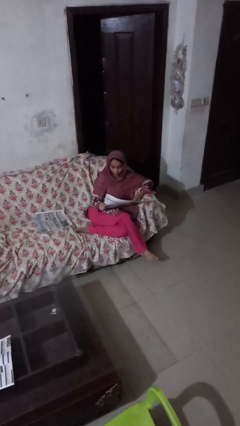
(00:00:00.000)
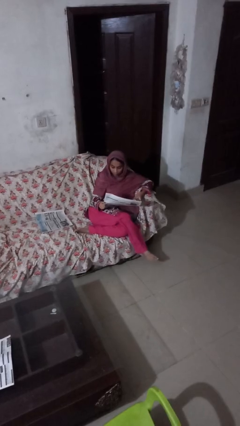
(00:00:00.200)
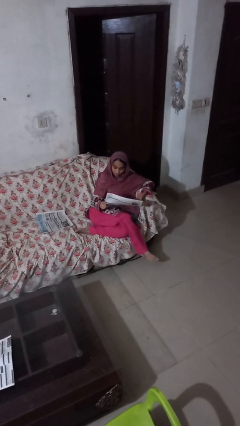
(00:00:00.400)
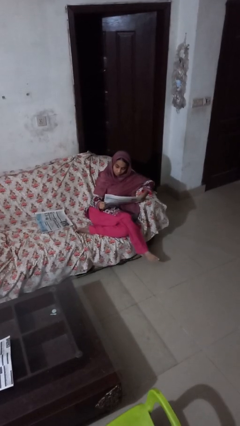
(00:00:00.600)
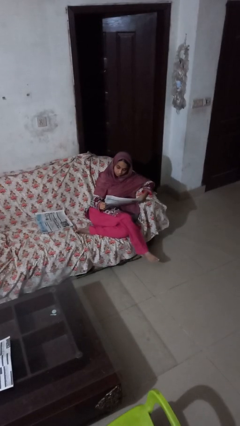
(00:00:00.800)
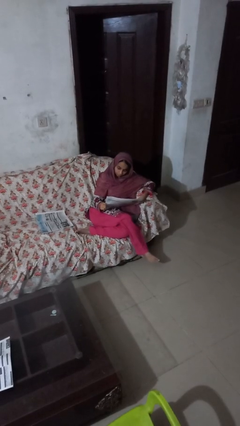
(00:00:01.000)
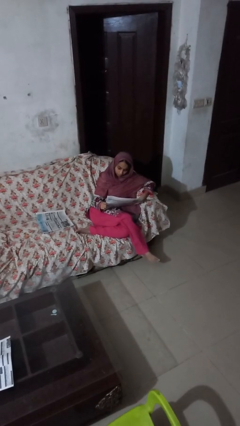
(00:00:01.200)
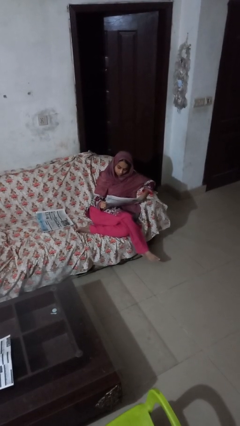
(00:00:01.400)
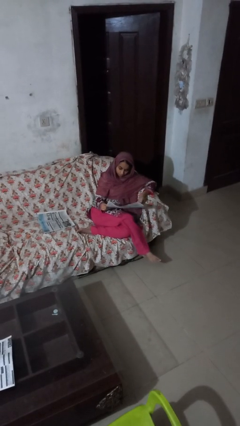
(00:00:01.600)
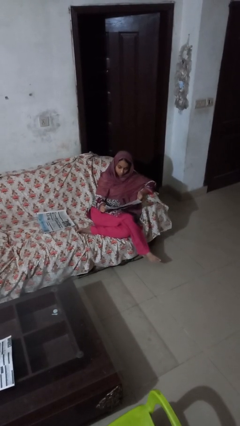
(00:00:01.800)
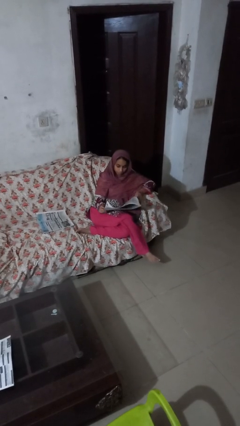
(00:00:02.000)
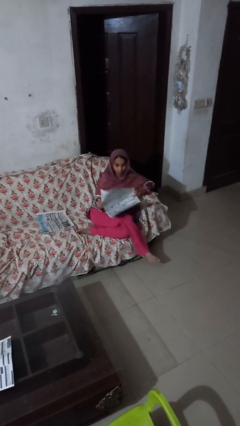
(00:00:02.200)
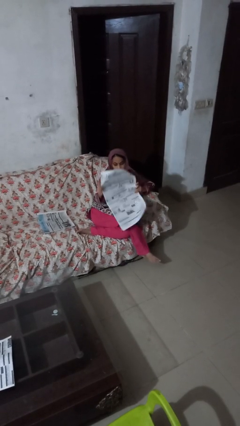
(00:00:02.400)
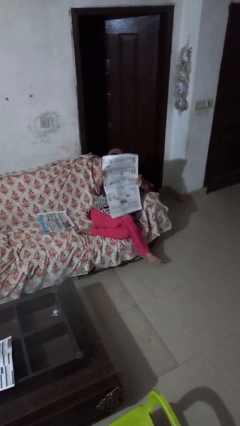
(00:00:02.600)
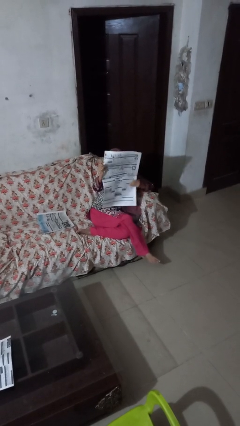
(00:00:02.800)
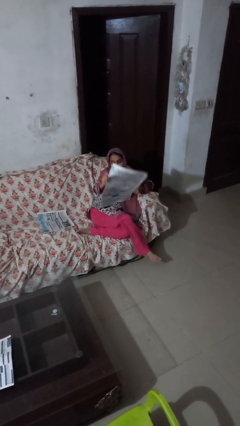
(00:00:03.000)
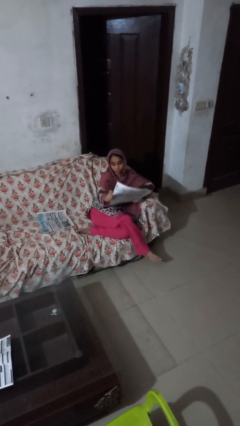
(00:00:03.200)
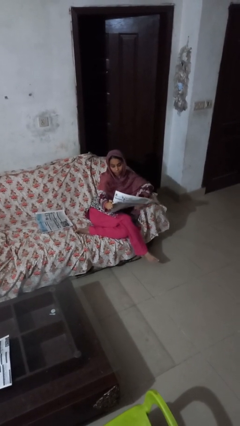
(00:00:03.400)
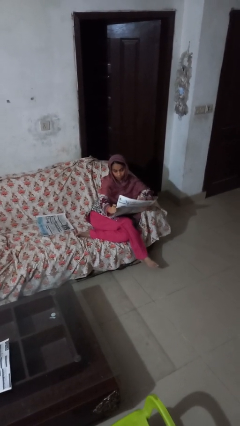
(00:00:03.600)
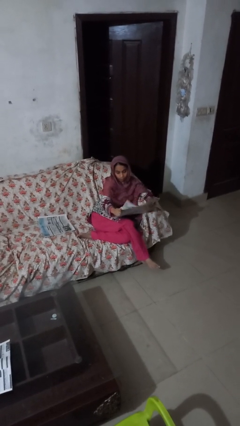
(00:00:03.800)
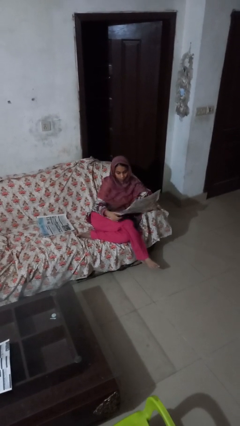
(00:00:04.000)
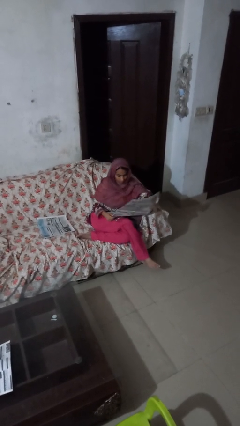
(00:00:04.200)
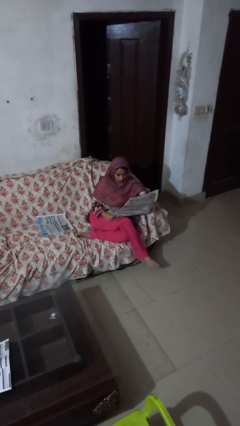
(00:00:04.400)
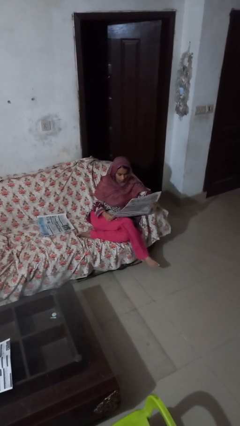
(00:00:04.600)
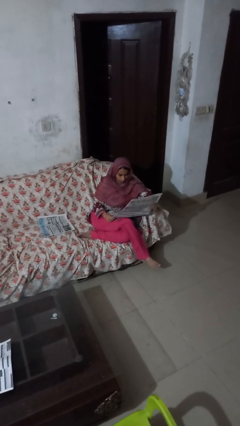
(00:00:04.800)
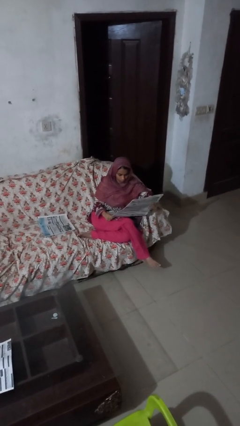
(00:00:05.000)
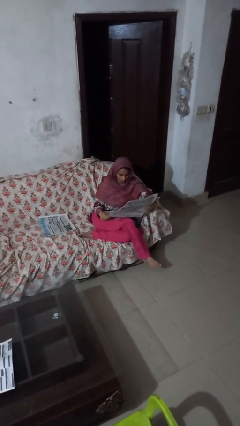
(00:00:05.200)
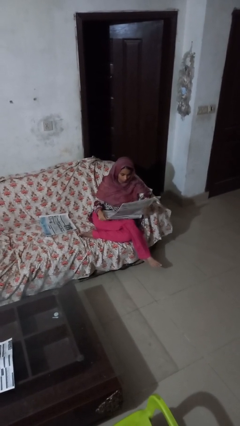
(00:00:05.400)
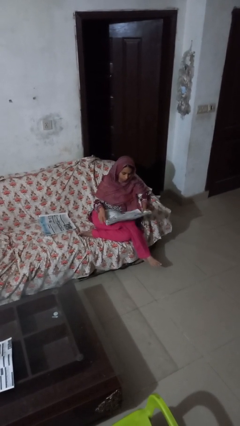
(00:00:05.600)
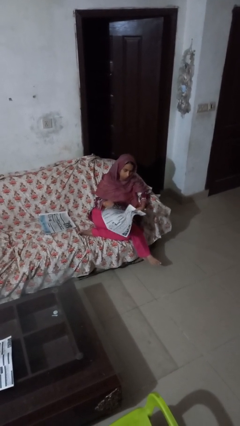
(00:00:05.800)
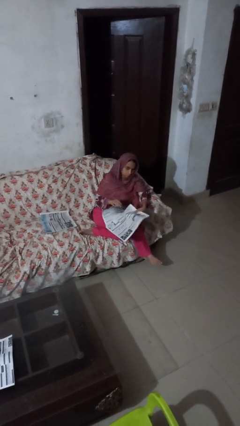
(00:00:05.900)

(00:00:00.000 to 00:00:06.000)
person reads newspaper

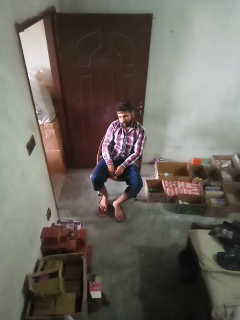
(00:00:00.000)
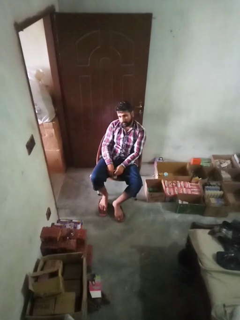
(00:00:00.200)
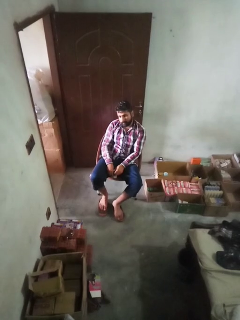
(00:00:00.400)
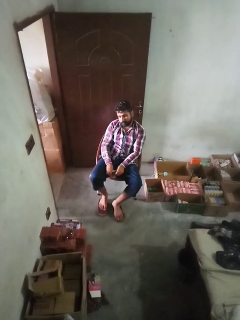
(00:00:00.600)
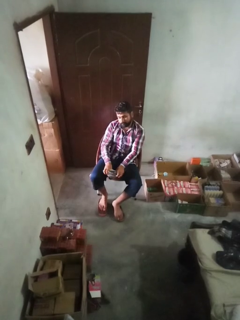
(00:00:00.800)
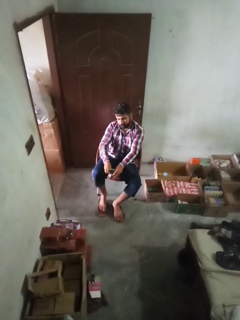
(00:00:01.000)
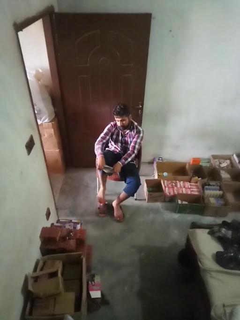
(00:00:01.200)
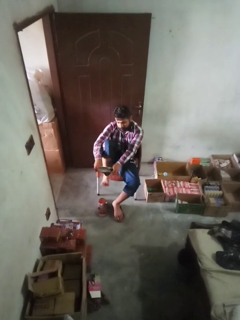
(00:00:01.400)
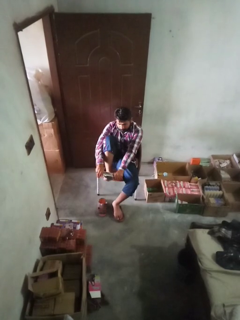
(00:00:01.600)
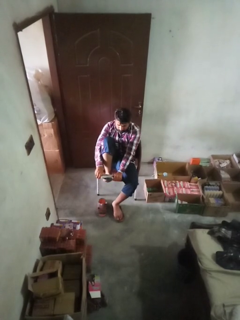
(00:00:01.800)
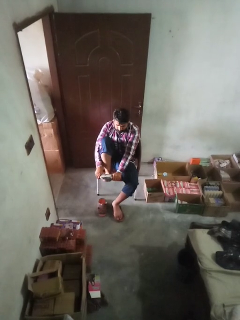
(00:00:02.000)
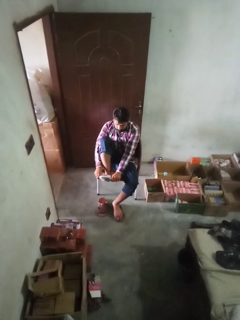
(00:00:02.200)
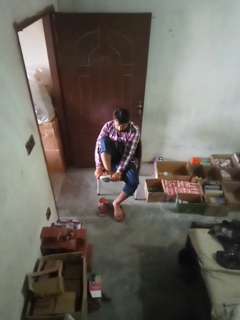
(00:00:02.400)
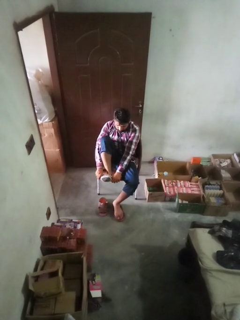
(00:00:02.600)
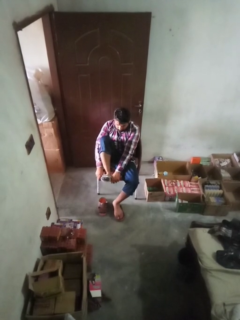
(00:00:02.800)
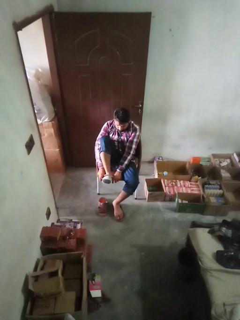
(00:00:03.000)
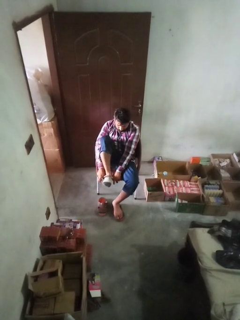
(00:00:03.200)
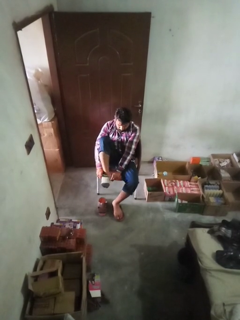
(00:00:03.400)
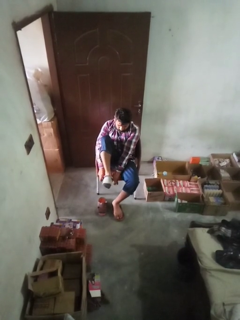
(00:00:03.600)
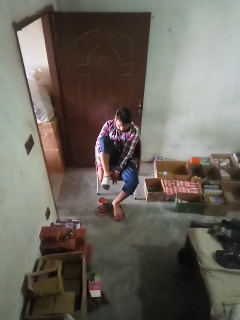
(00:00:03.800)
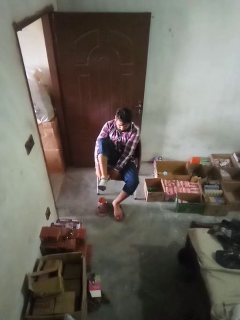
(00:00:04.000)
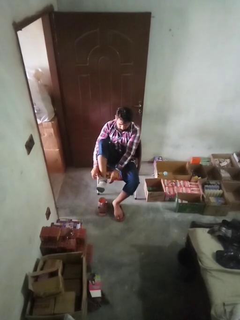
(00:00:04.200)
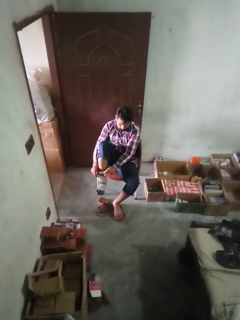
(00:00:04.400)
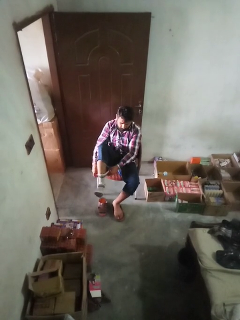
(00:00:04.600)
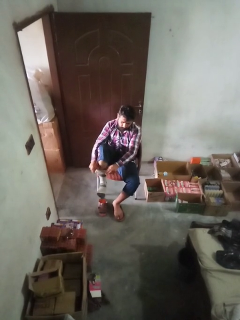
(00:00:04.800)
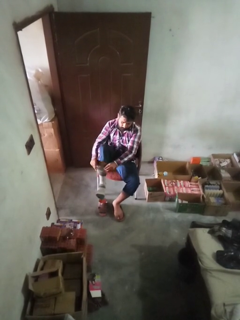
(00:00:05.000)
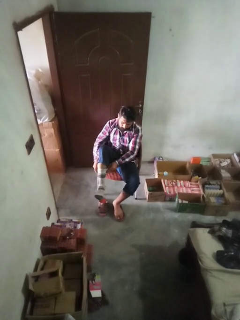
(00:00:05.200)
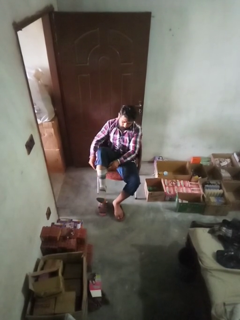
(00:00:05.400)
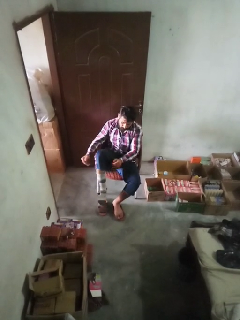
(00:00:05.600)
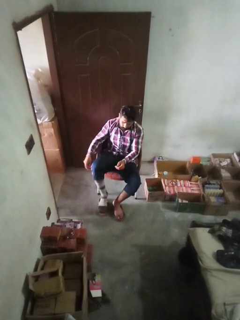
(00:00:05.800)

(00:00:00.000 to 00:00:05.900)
person puts on socks

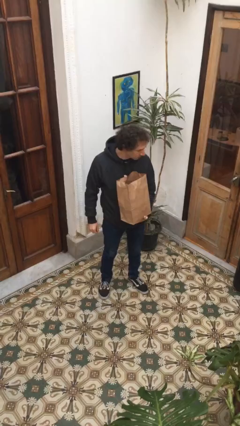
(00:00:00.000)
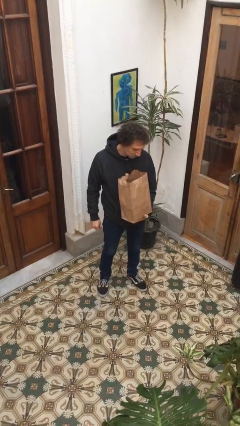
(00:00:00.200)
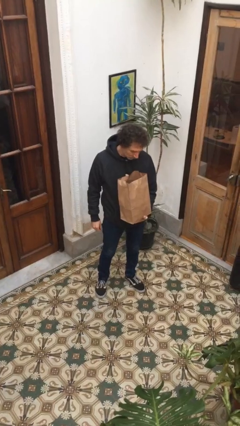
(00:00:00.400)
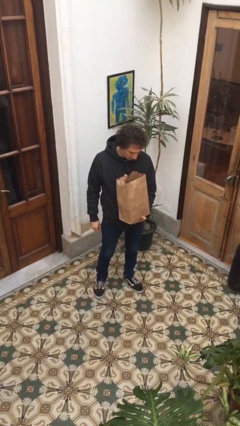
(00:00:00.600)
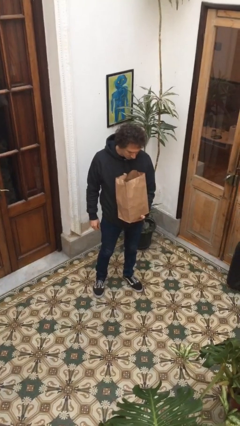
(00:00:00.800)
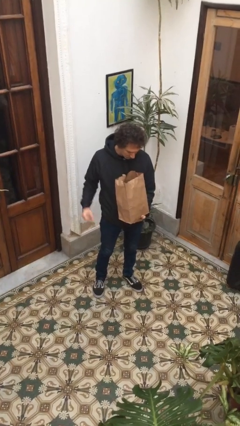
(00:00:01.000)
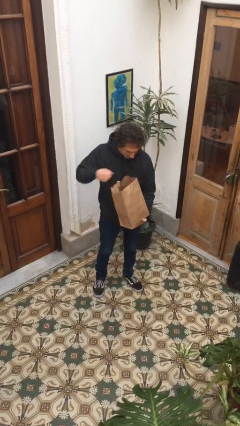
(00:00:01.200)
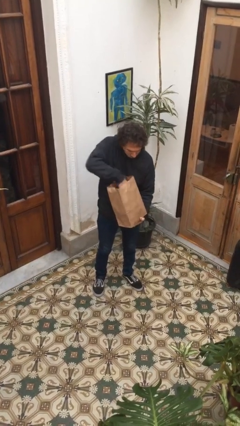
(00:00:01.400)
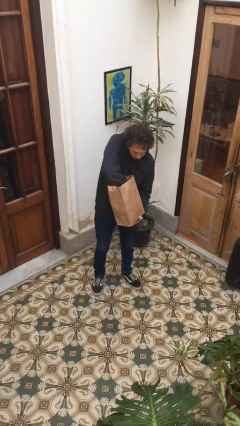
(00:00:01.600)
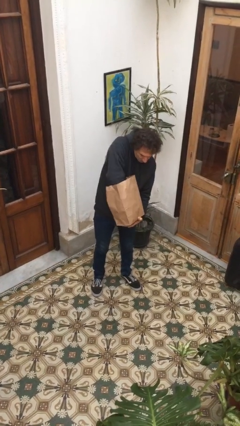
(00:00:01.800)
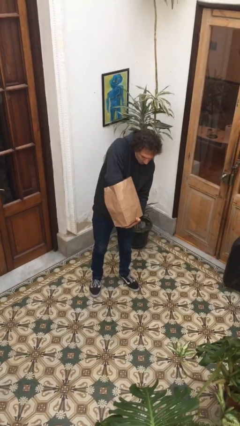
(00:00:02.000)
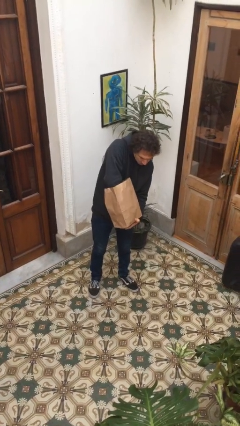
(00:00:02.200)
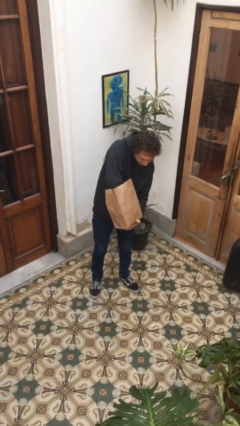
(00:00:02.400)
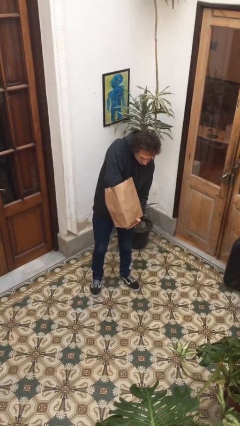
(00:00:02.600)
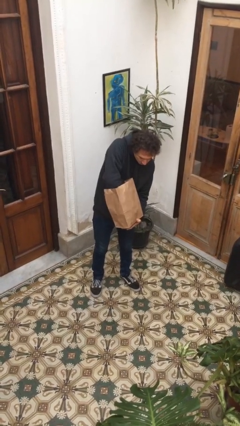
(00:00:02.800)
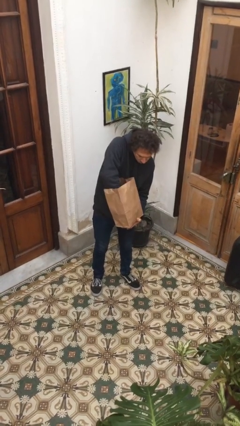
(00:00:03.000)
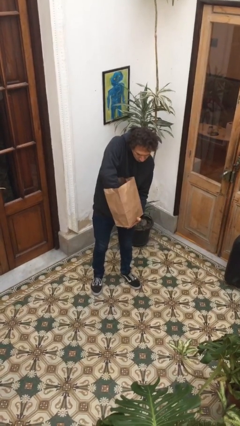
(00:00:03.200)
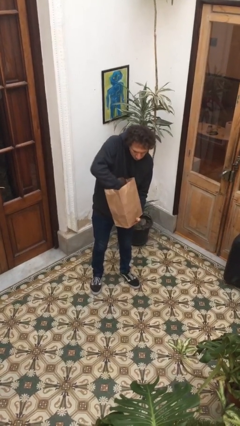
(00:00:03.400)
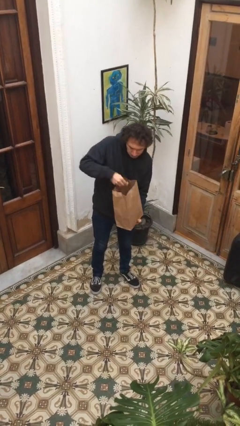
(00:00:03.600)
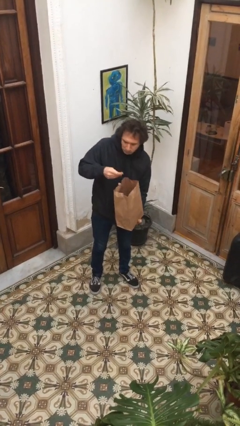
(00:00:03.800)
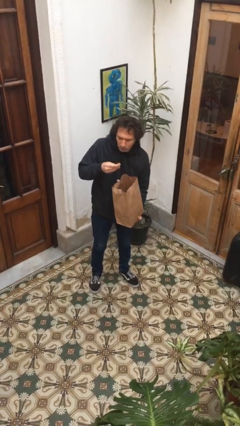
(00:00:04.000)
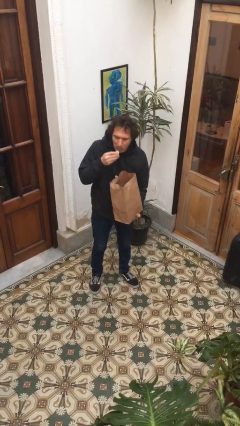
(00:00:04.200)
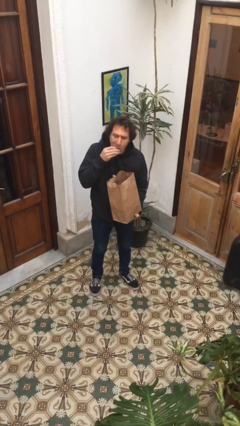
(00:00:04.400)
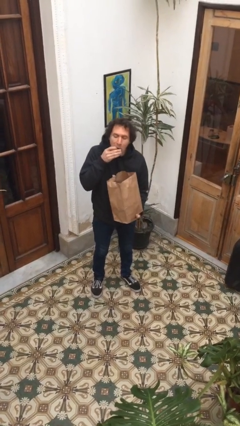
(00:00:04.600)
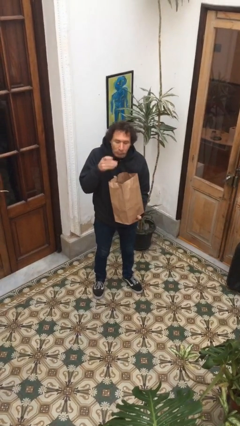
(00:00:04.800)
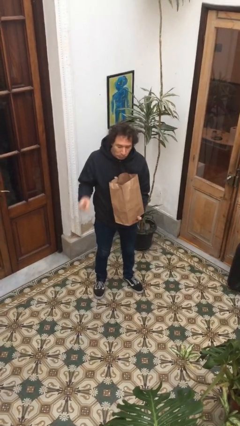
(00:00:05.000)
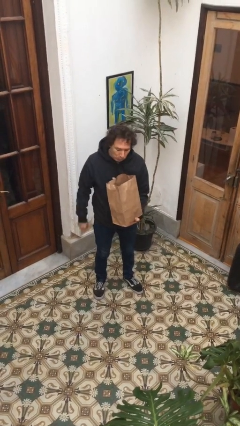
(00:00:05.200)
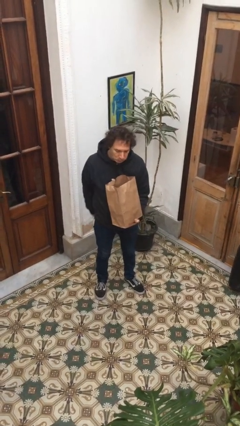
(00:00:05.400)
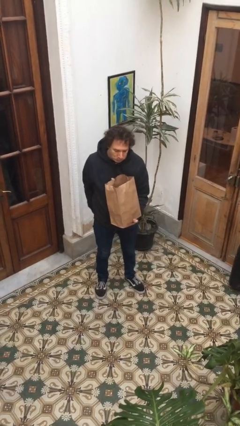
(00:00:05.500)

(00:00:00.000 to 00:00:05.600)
person eats snack from bag

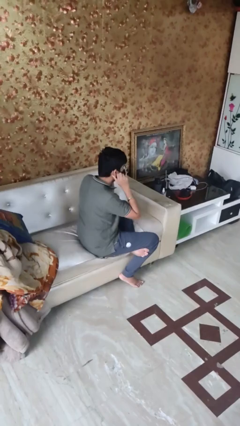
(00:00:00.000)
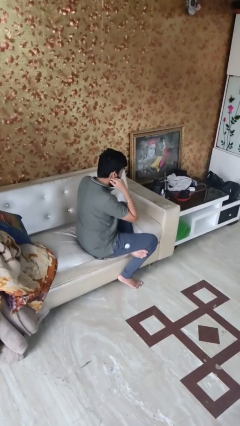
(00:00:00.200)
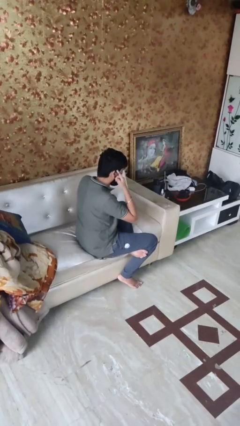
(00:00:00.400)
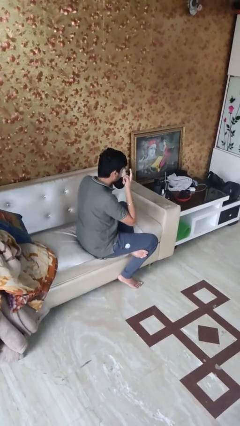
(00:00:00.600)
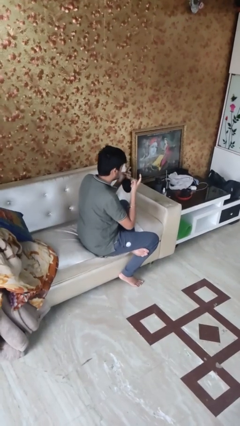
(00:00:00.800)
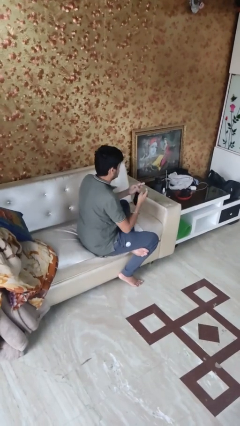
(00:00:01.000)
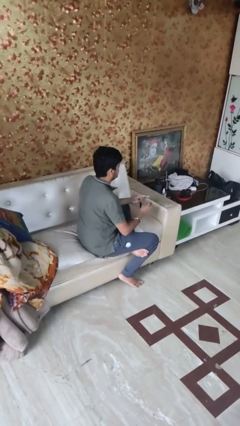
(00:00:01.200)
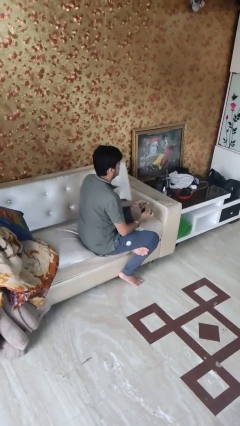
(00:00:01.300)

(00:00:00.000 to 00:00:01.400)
person takes off facemask
